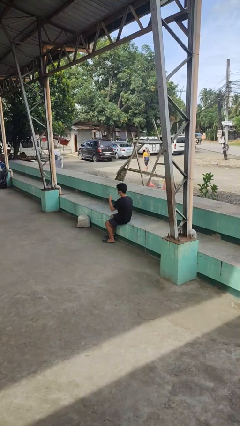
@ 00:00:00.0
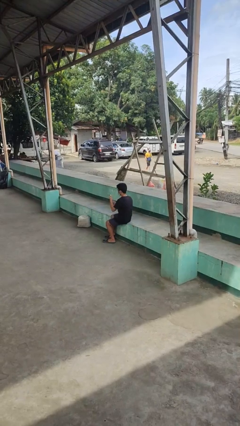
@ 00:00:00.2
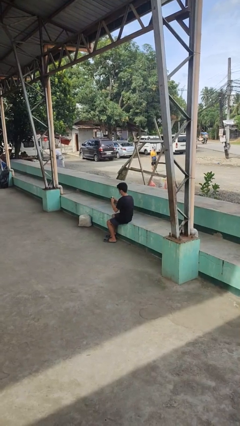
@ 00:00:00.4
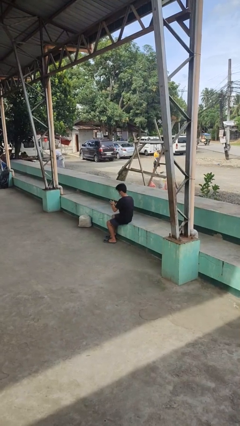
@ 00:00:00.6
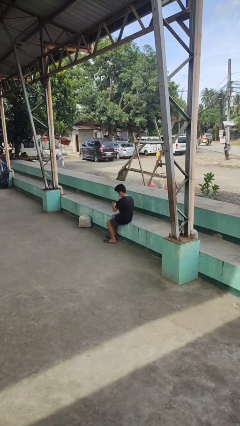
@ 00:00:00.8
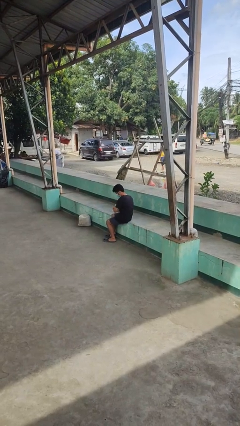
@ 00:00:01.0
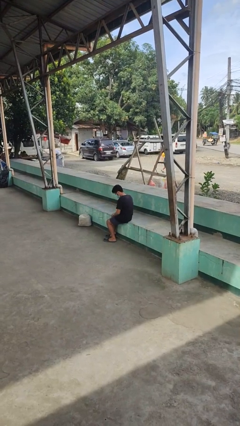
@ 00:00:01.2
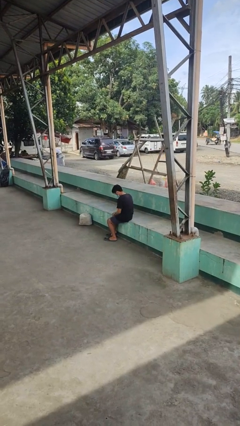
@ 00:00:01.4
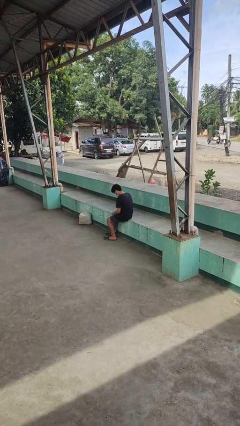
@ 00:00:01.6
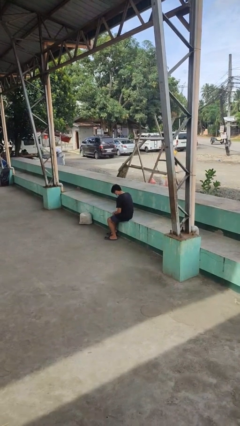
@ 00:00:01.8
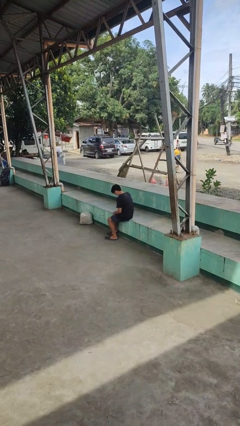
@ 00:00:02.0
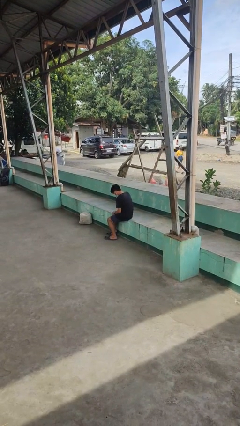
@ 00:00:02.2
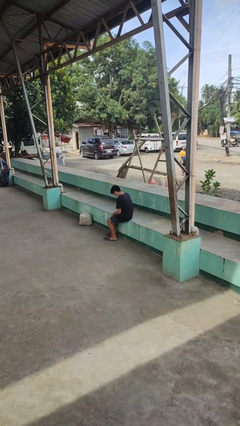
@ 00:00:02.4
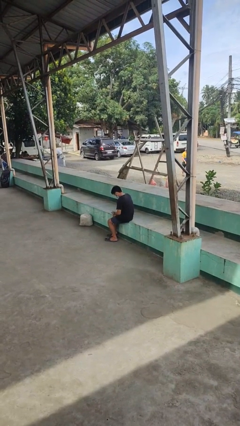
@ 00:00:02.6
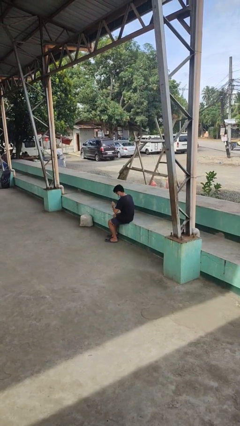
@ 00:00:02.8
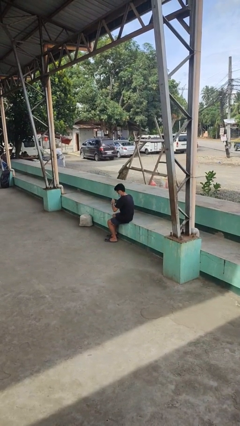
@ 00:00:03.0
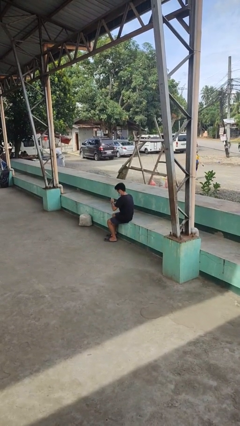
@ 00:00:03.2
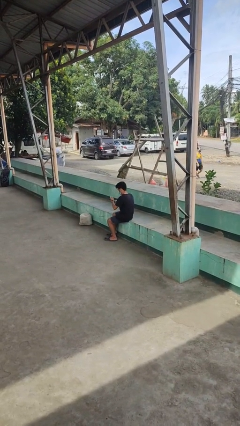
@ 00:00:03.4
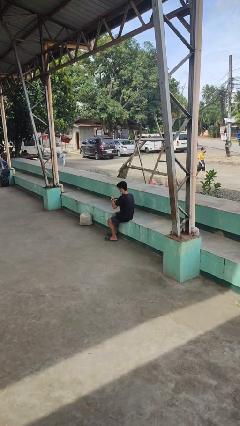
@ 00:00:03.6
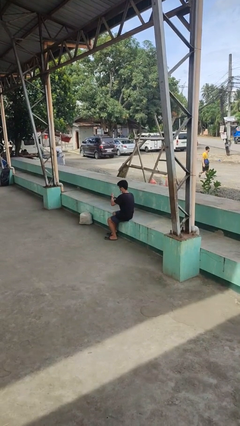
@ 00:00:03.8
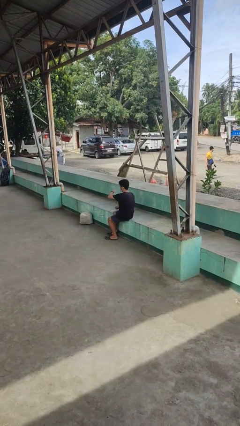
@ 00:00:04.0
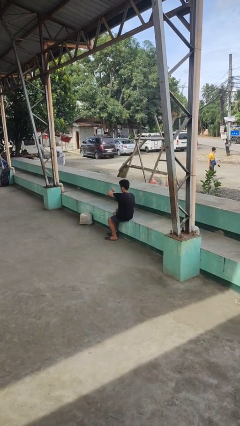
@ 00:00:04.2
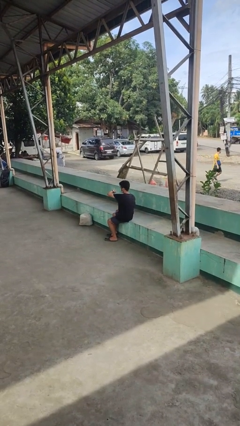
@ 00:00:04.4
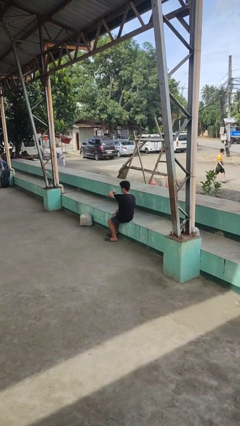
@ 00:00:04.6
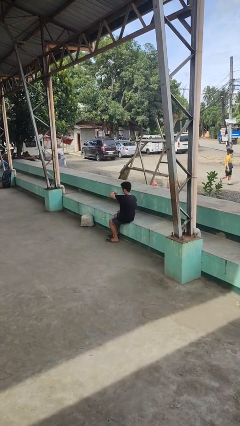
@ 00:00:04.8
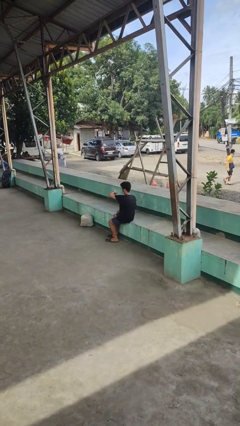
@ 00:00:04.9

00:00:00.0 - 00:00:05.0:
person puts on wristwatch

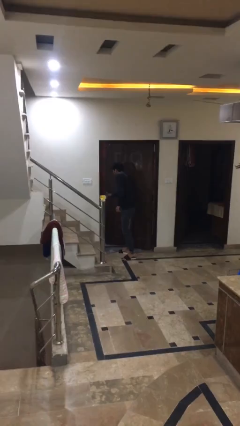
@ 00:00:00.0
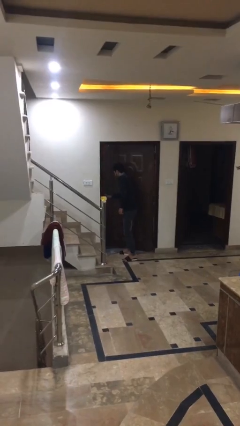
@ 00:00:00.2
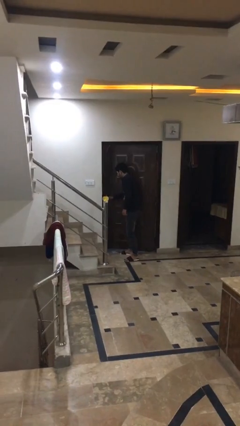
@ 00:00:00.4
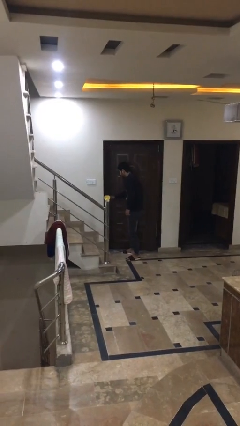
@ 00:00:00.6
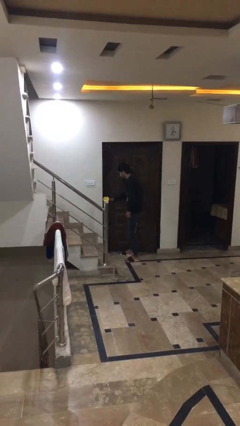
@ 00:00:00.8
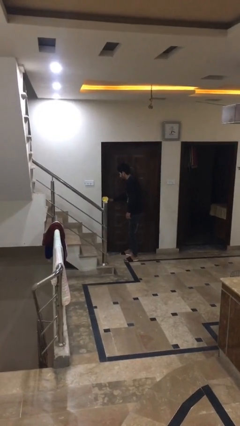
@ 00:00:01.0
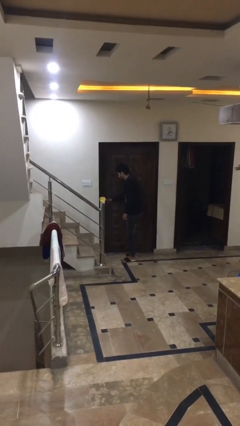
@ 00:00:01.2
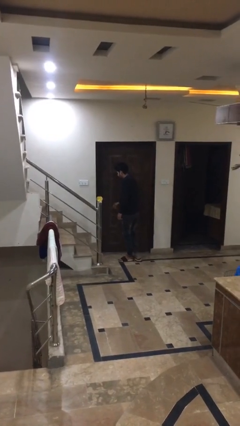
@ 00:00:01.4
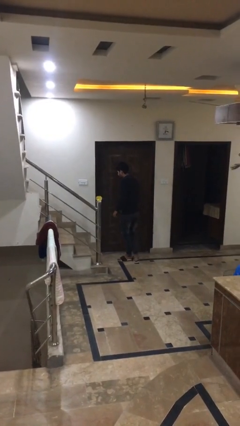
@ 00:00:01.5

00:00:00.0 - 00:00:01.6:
person closes facility door

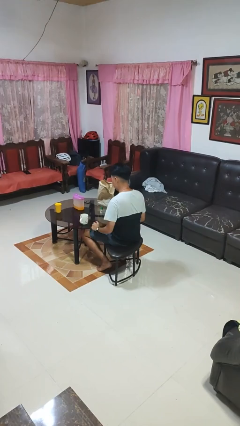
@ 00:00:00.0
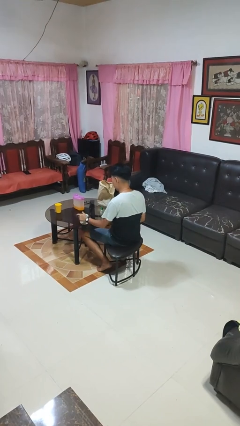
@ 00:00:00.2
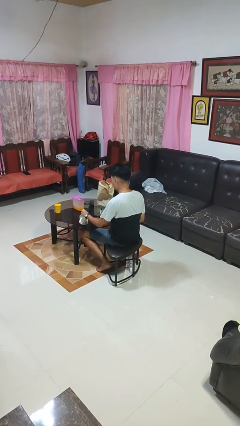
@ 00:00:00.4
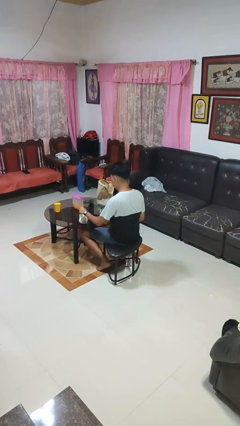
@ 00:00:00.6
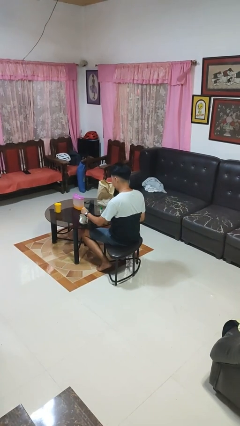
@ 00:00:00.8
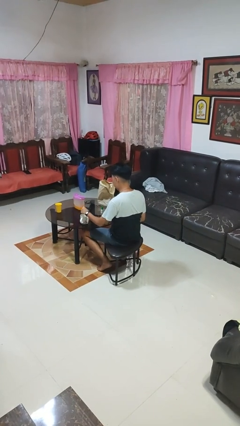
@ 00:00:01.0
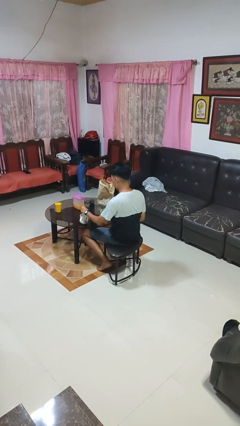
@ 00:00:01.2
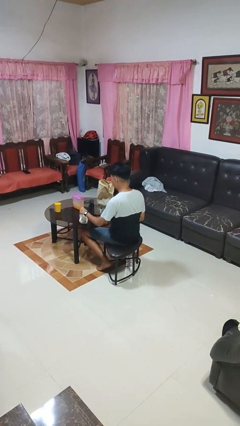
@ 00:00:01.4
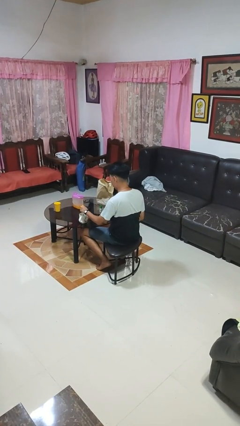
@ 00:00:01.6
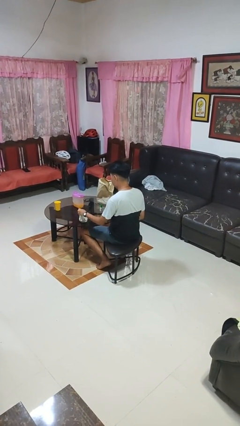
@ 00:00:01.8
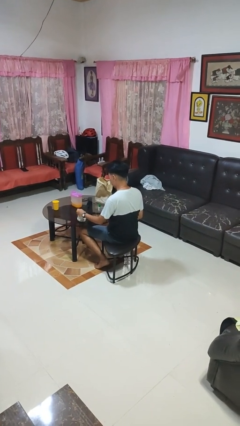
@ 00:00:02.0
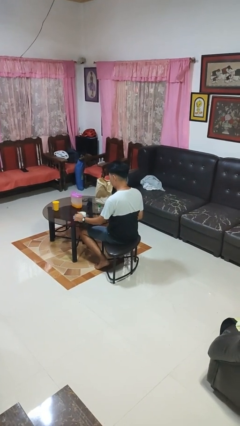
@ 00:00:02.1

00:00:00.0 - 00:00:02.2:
person stirs mug

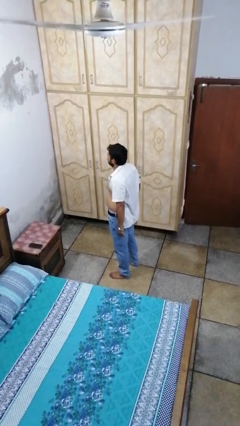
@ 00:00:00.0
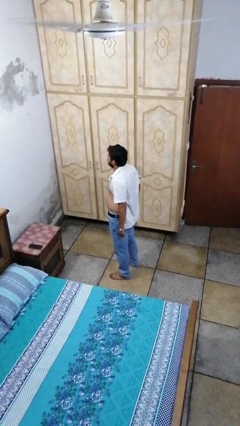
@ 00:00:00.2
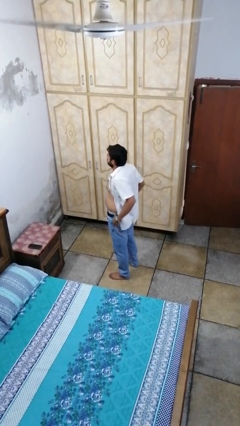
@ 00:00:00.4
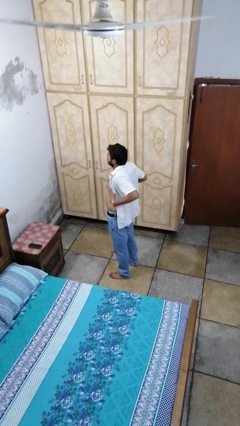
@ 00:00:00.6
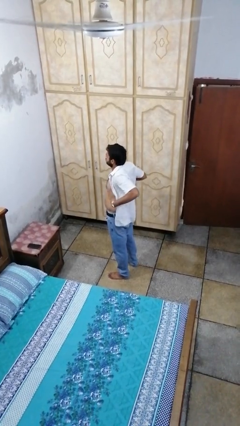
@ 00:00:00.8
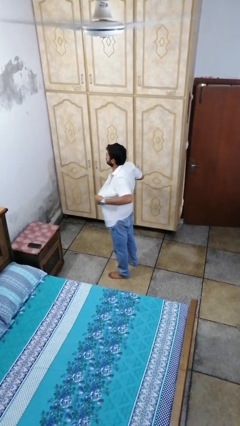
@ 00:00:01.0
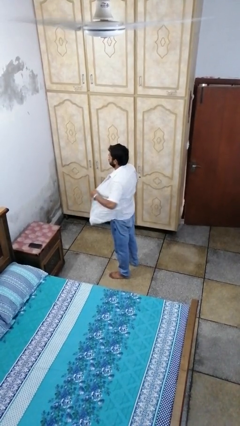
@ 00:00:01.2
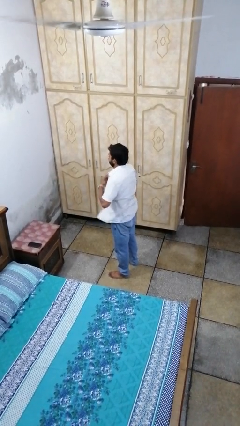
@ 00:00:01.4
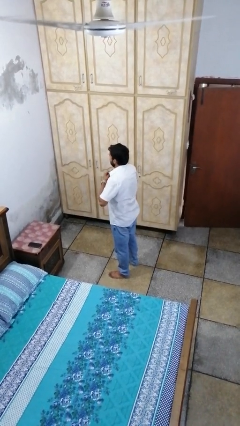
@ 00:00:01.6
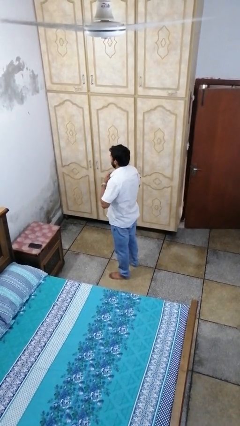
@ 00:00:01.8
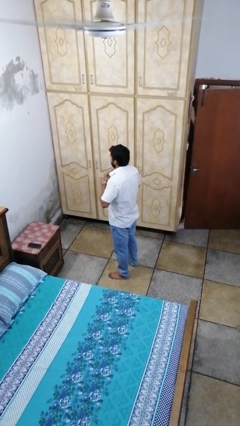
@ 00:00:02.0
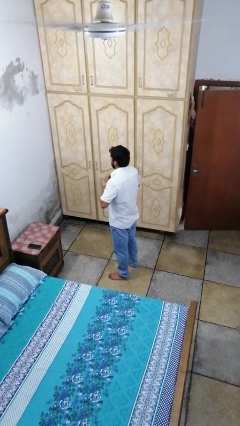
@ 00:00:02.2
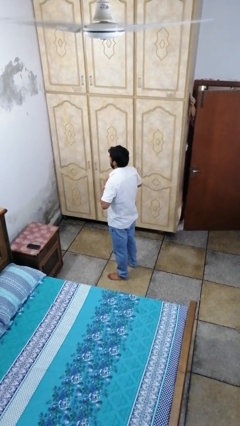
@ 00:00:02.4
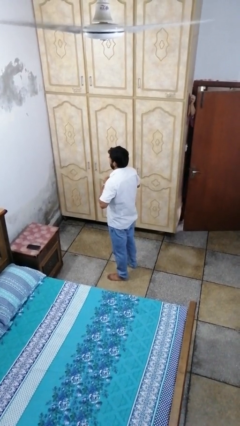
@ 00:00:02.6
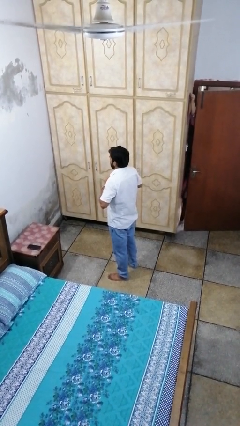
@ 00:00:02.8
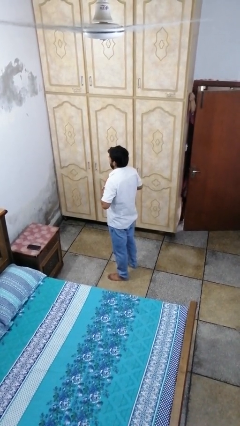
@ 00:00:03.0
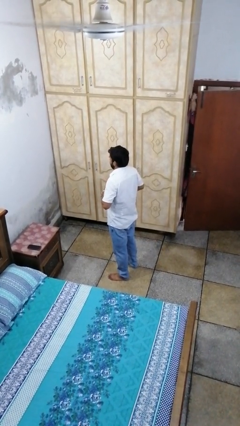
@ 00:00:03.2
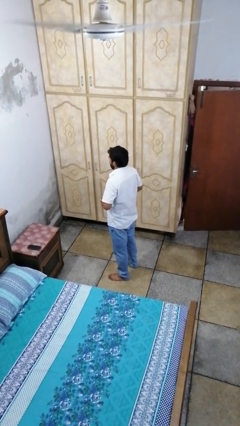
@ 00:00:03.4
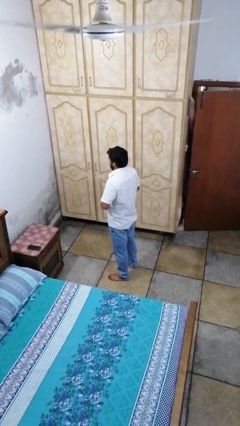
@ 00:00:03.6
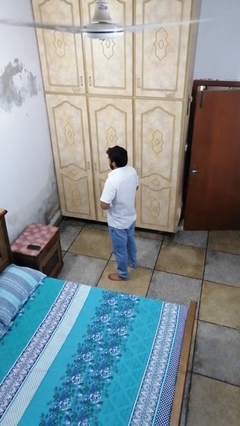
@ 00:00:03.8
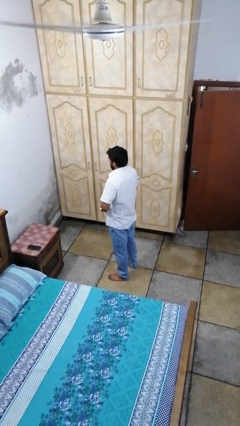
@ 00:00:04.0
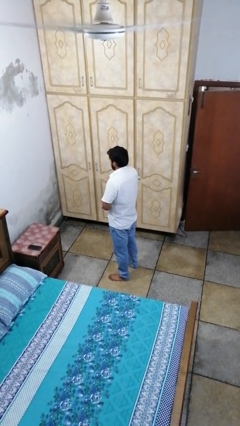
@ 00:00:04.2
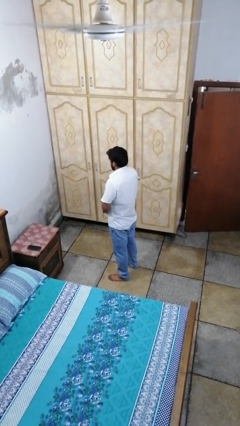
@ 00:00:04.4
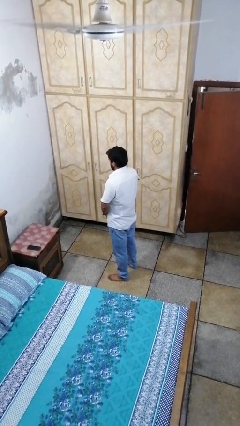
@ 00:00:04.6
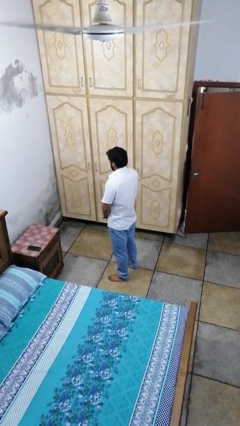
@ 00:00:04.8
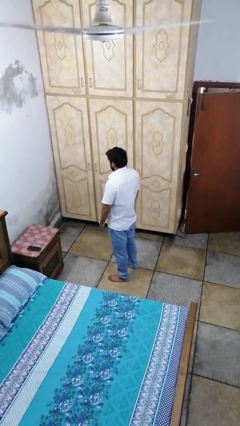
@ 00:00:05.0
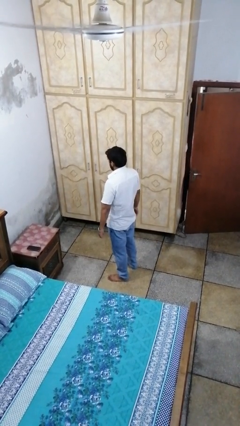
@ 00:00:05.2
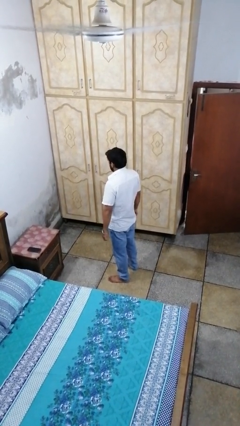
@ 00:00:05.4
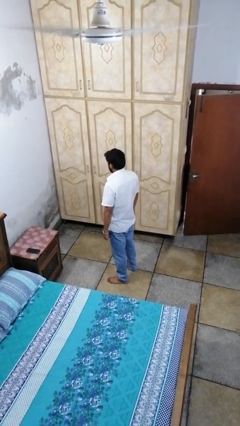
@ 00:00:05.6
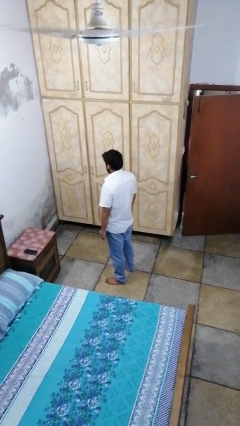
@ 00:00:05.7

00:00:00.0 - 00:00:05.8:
person buttons shirt

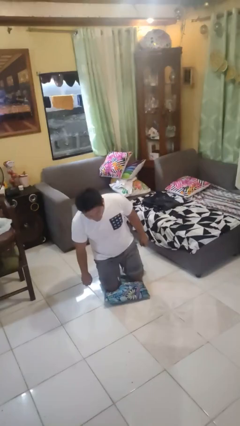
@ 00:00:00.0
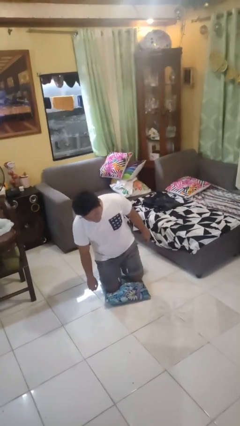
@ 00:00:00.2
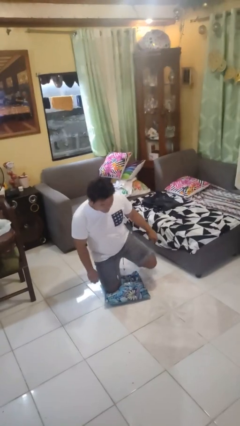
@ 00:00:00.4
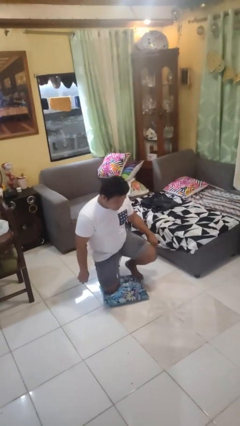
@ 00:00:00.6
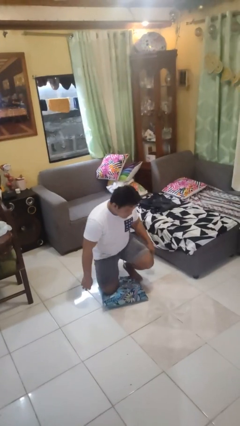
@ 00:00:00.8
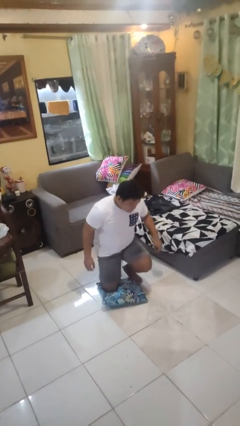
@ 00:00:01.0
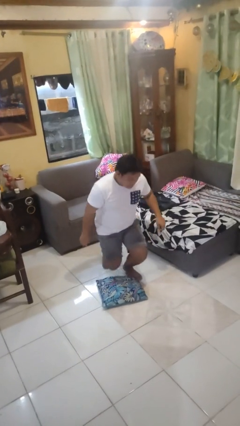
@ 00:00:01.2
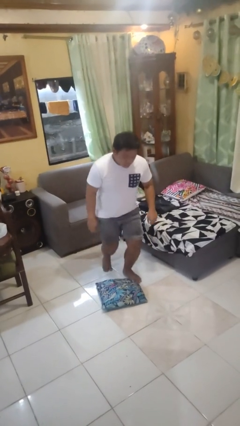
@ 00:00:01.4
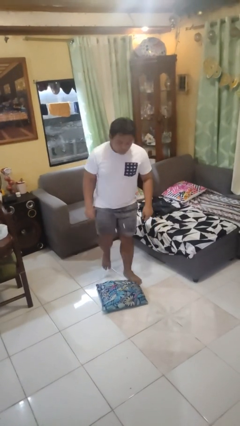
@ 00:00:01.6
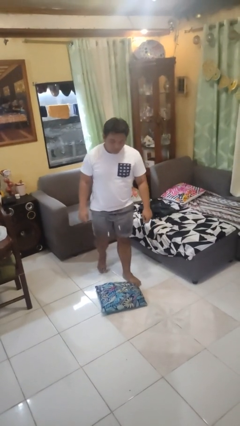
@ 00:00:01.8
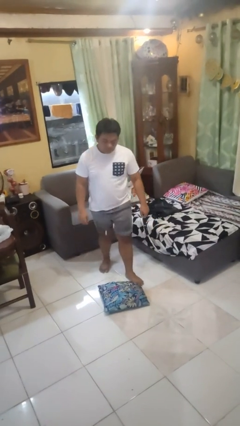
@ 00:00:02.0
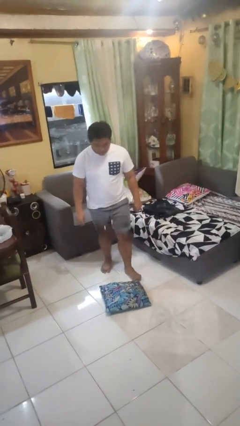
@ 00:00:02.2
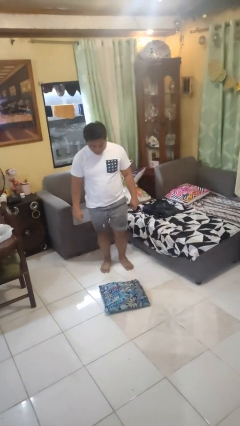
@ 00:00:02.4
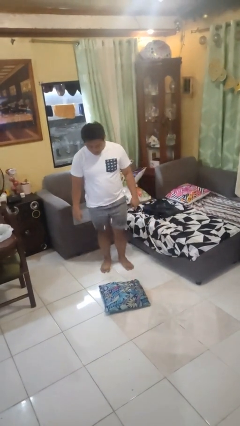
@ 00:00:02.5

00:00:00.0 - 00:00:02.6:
person stands up from floor

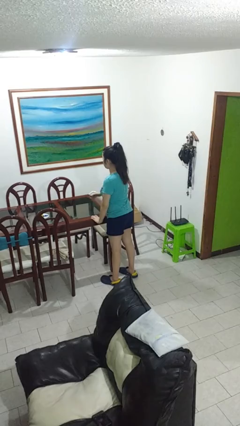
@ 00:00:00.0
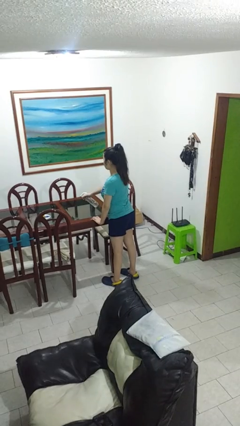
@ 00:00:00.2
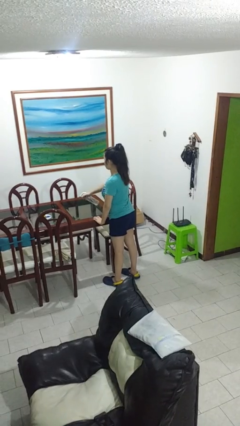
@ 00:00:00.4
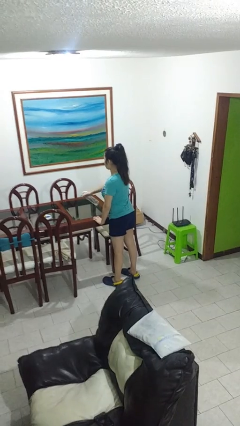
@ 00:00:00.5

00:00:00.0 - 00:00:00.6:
person sprays from bottle
